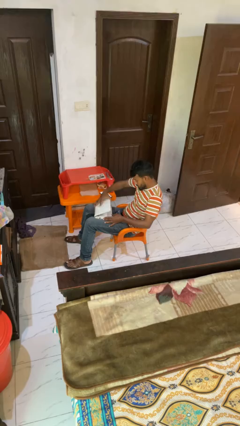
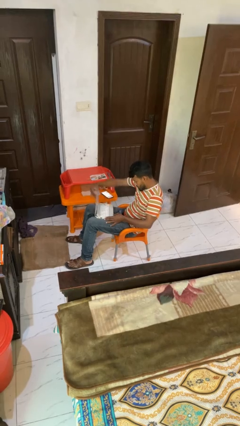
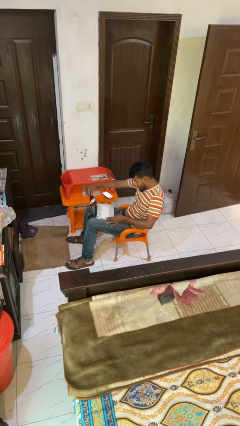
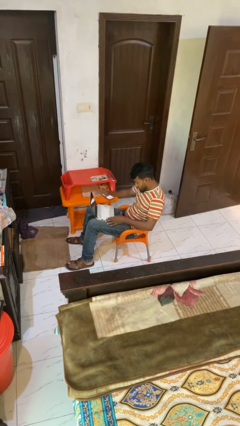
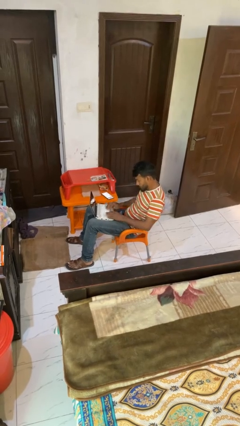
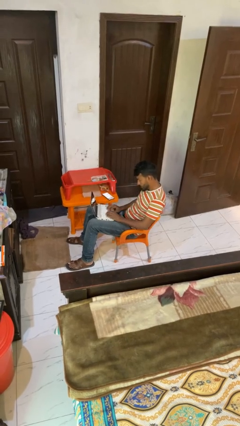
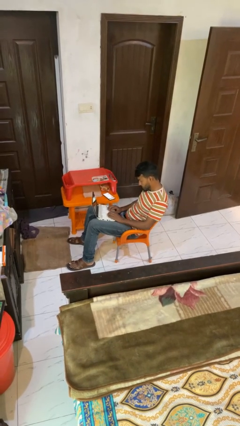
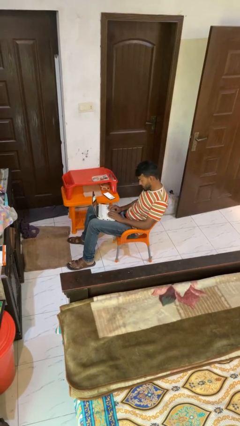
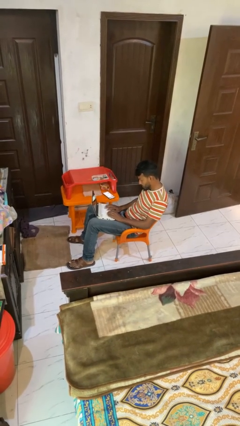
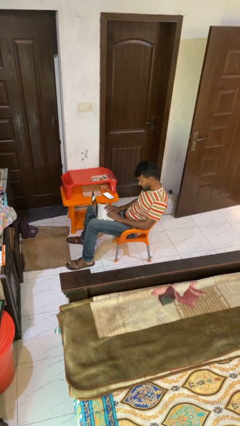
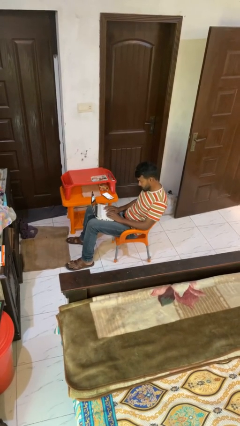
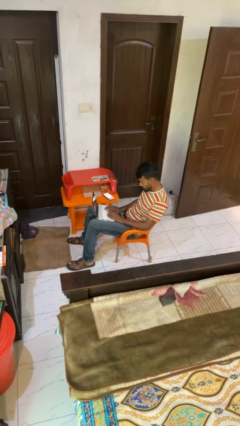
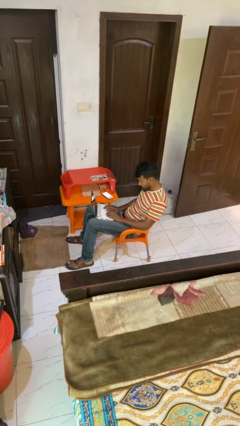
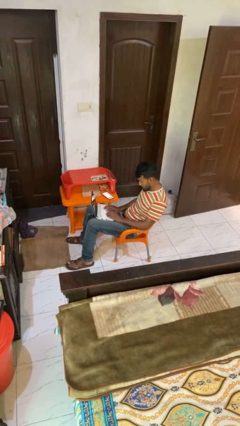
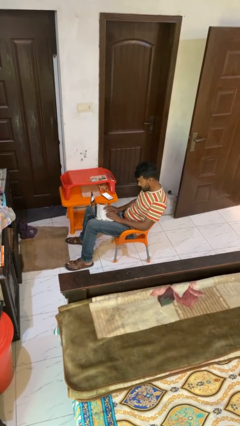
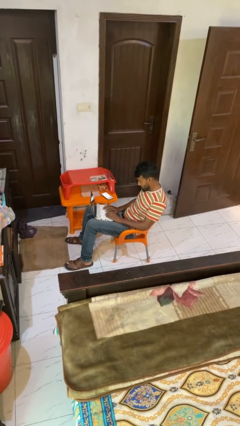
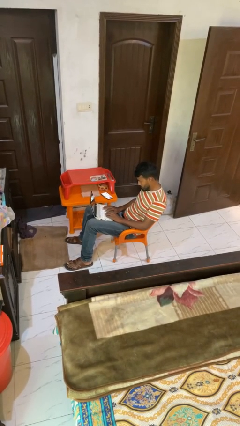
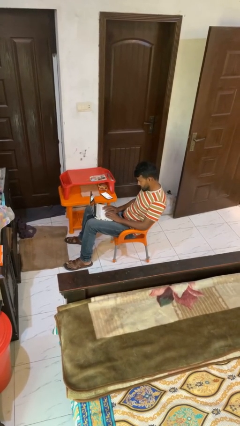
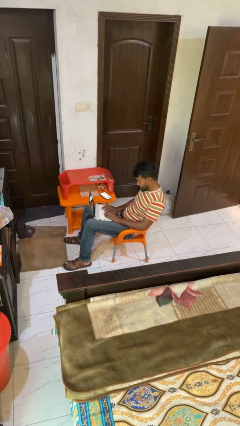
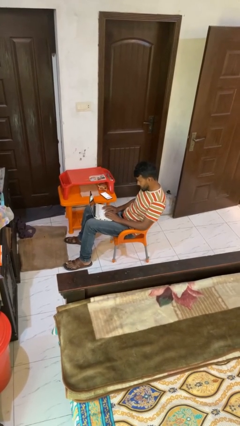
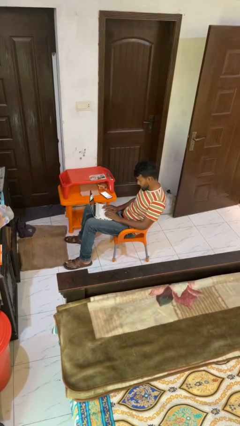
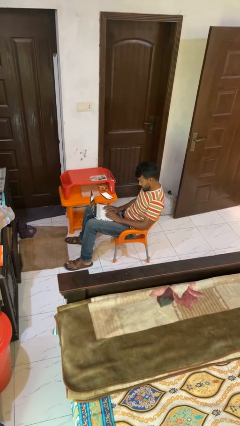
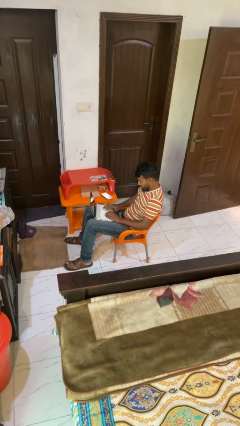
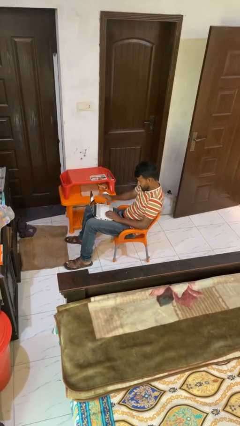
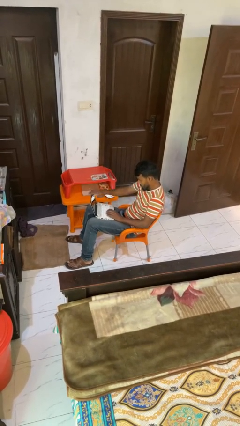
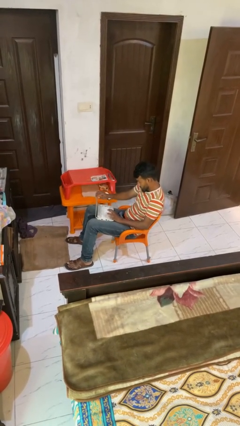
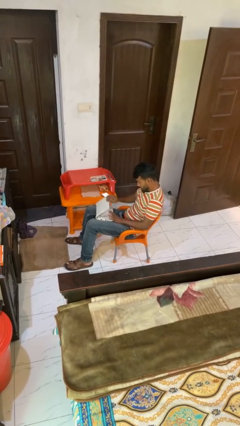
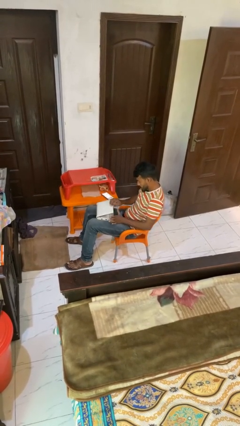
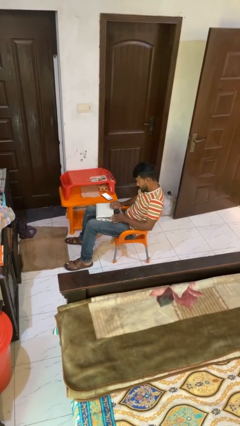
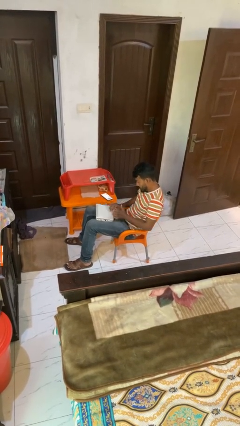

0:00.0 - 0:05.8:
person interacts with laptop

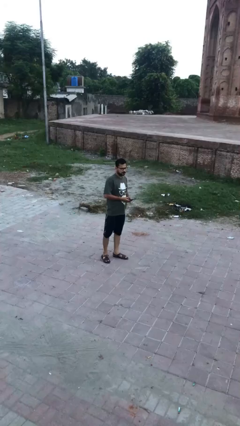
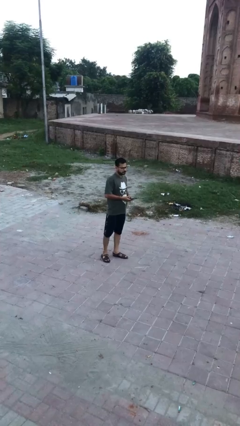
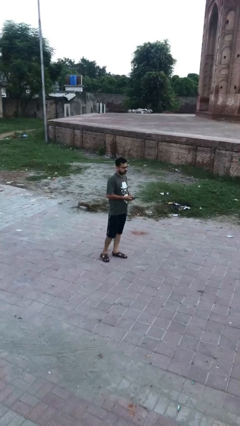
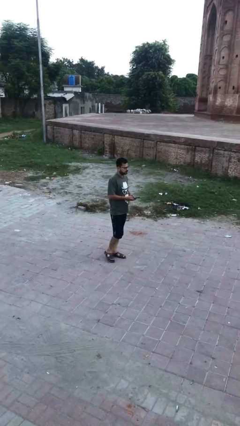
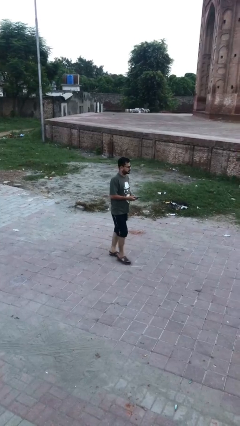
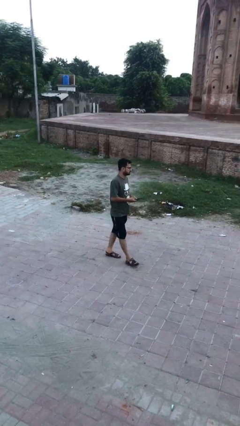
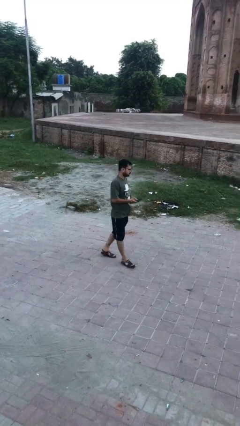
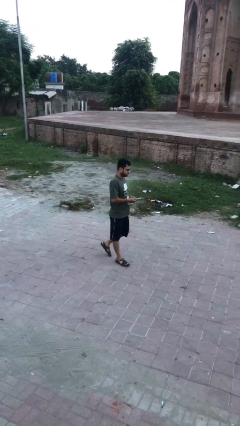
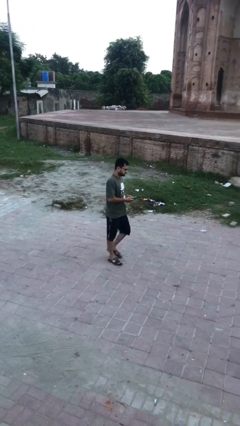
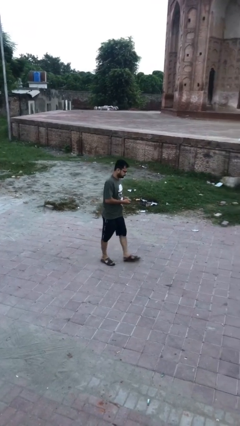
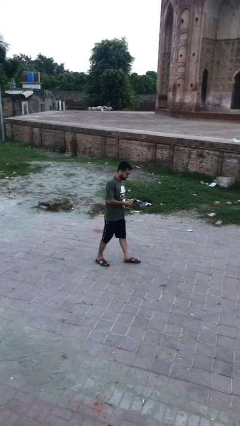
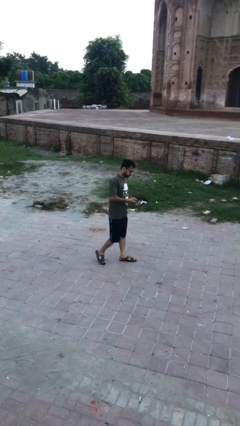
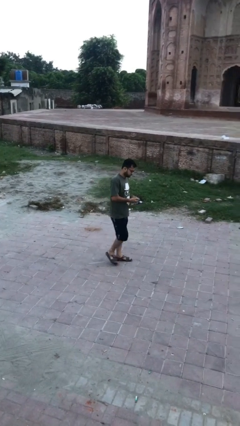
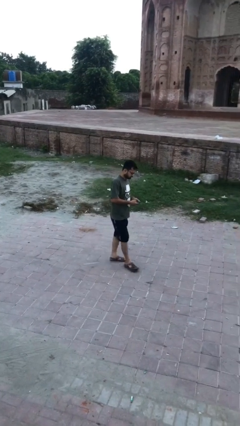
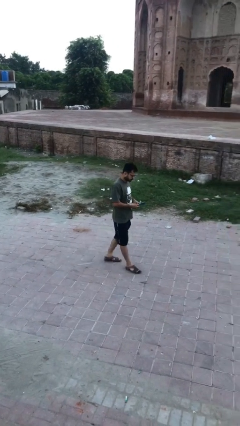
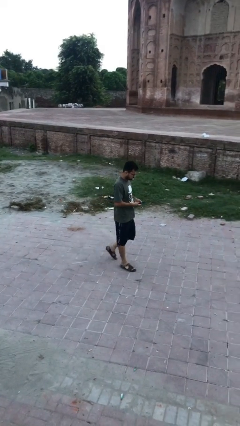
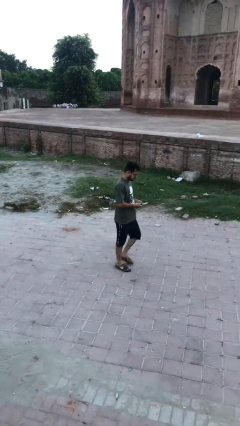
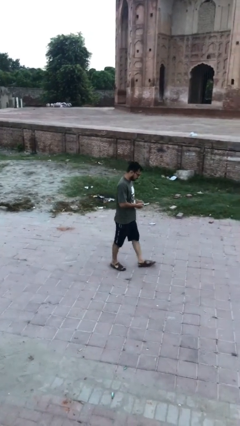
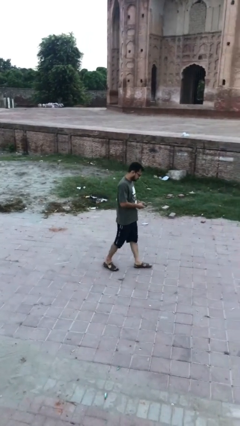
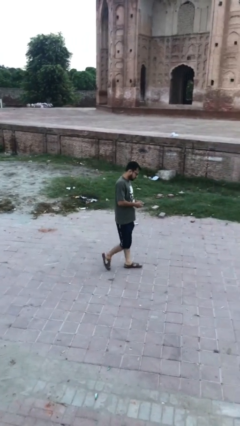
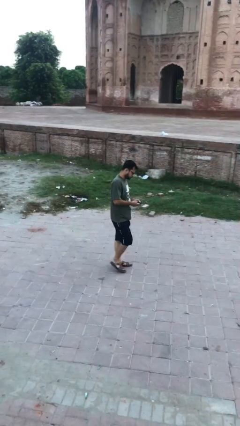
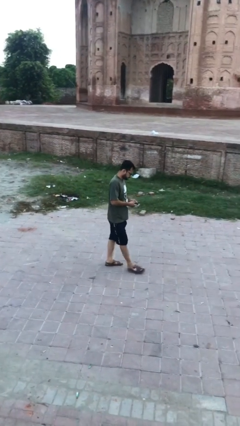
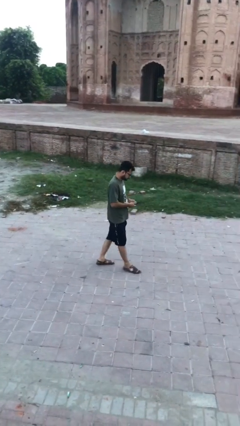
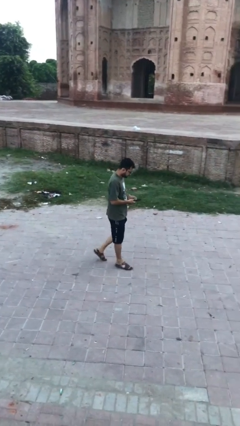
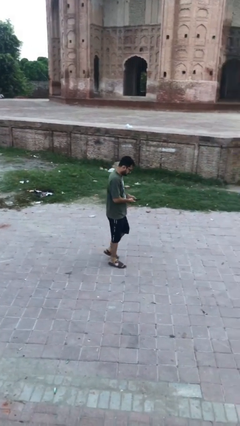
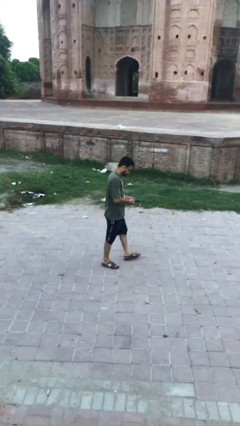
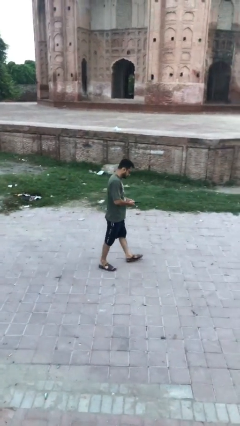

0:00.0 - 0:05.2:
person texts on phone

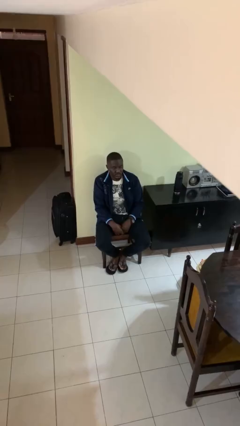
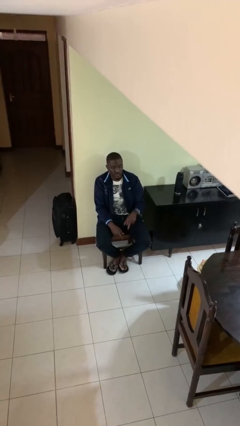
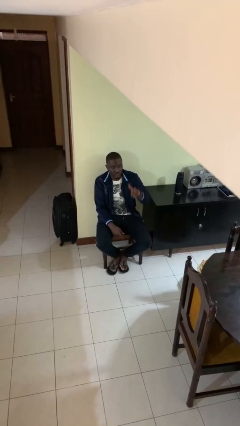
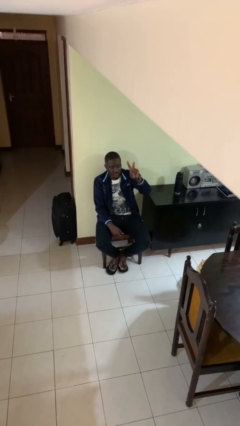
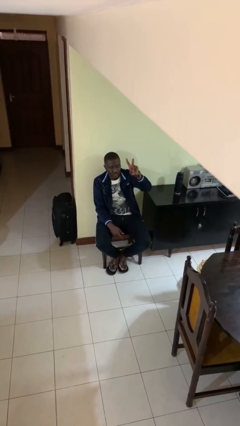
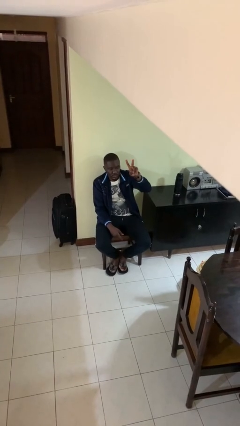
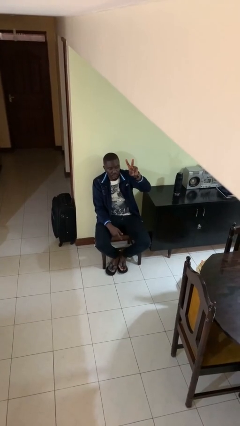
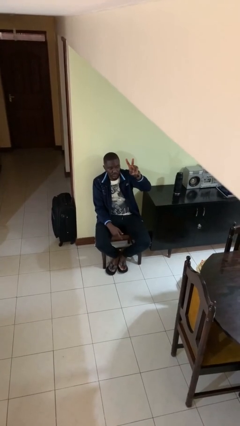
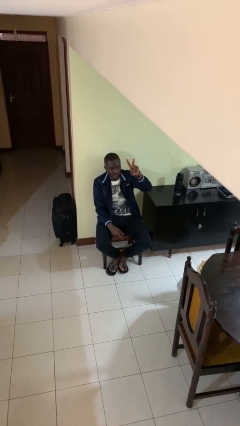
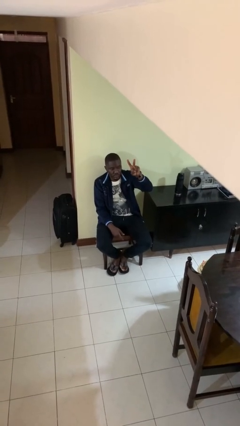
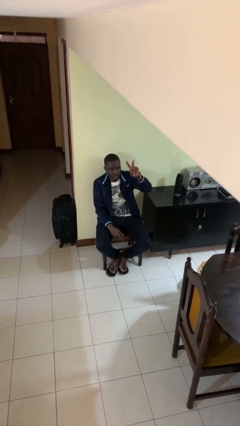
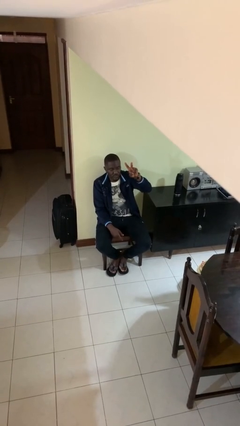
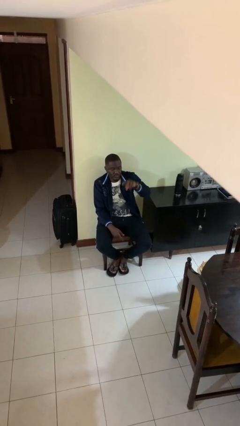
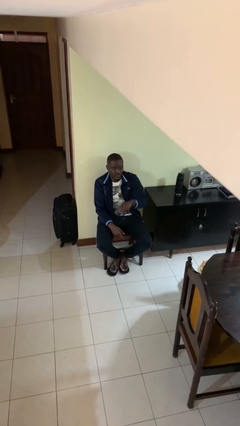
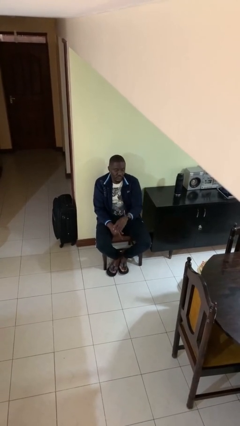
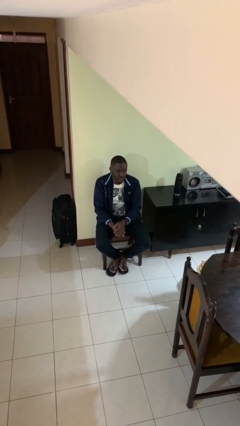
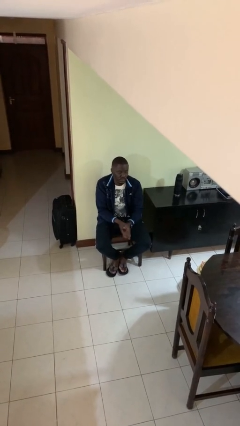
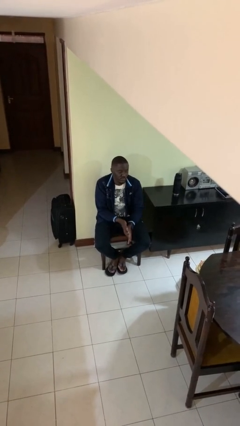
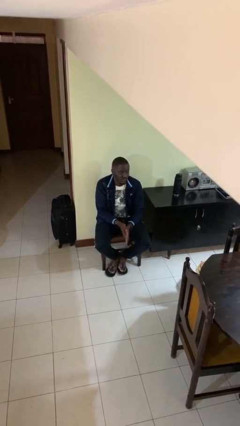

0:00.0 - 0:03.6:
person gestures peace

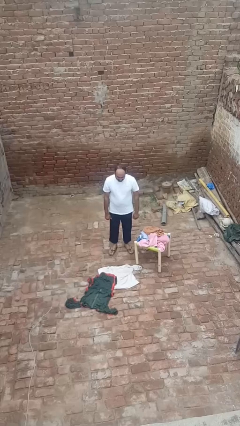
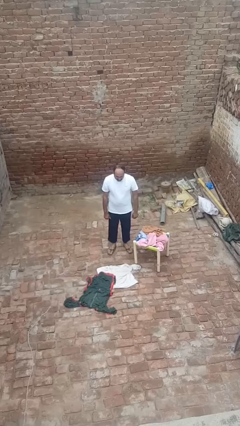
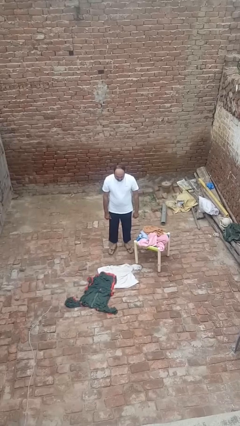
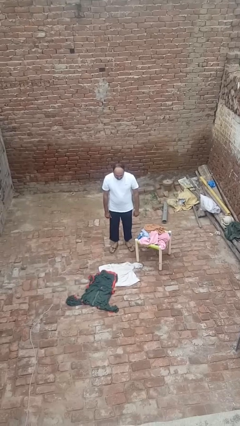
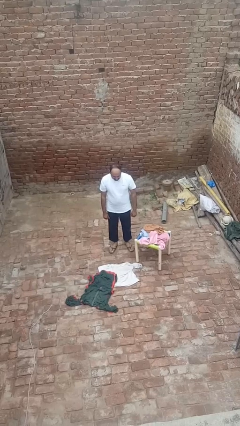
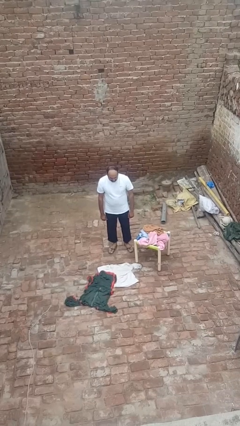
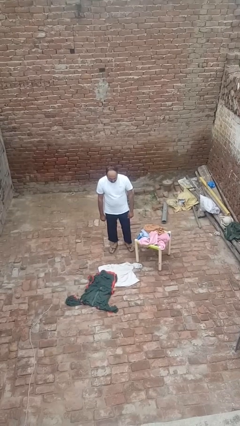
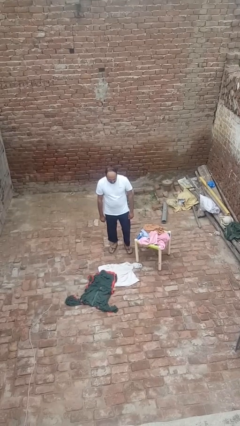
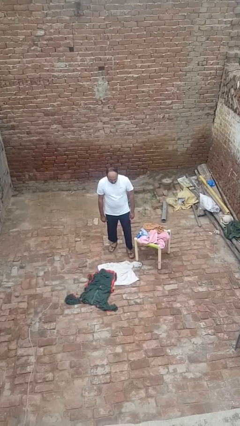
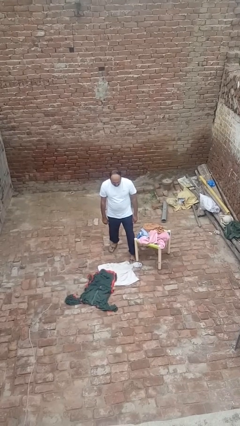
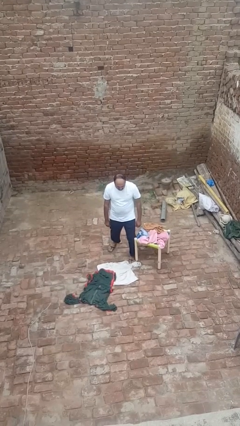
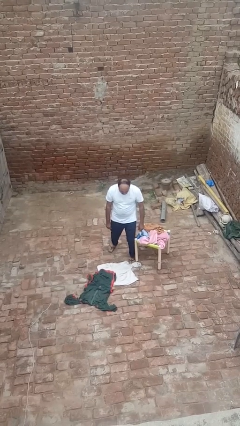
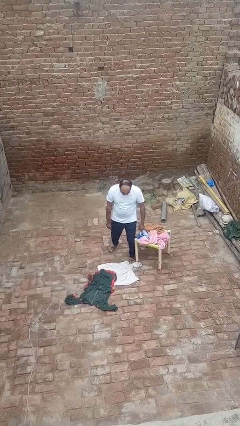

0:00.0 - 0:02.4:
person trips on object on floor

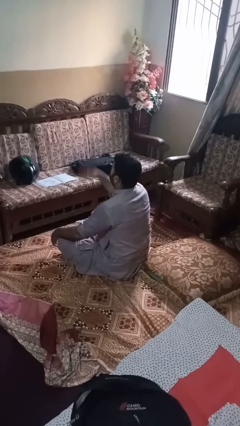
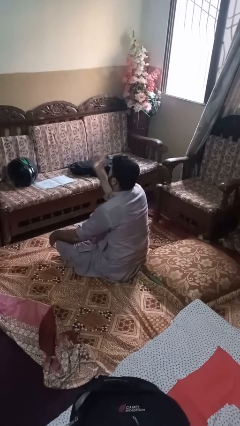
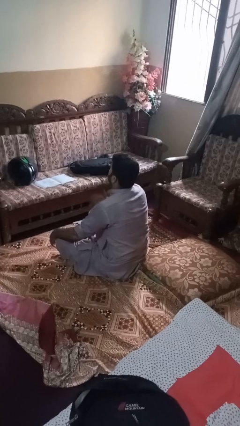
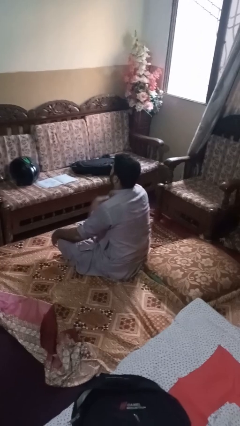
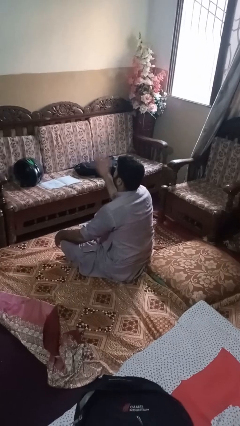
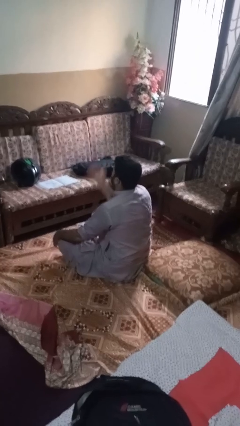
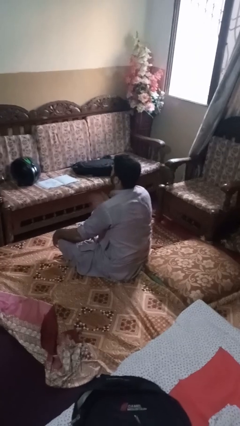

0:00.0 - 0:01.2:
person drums on chest
